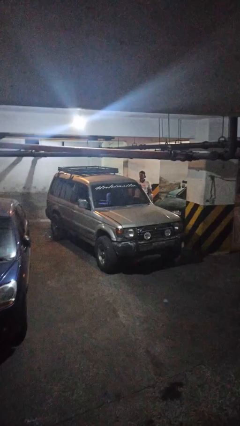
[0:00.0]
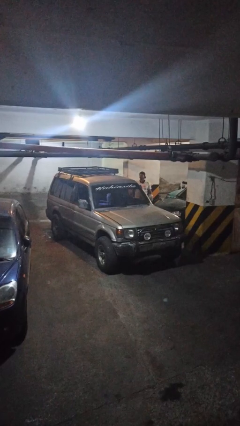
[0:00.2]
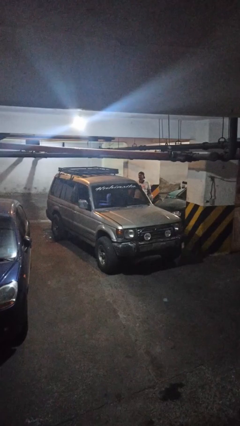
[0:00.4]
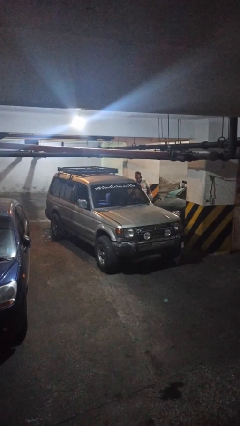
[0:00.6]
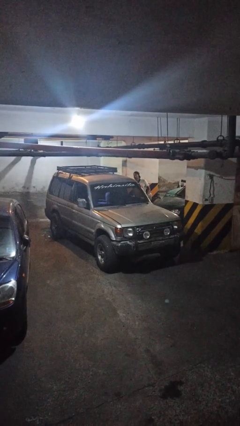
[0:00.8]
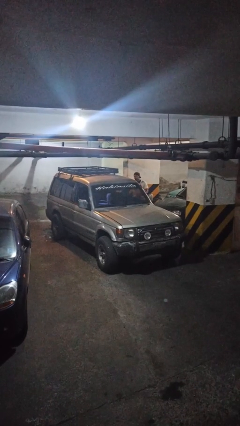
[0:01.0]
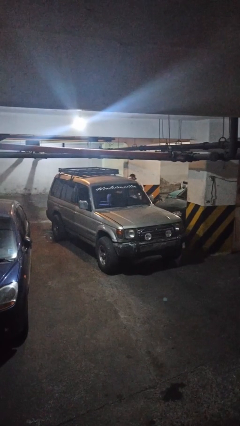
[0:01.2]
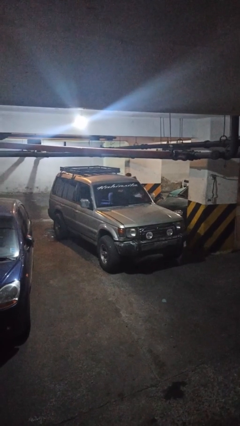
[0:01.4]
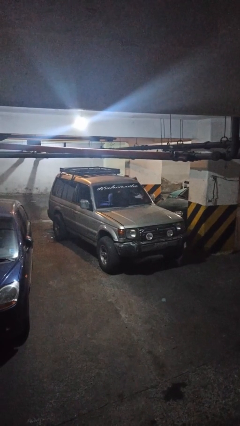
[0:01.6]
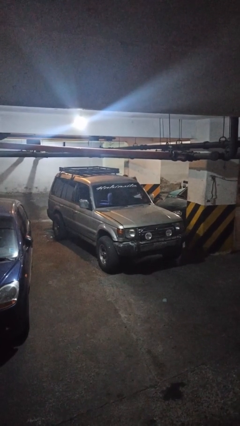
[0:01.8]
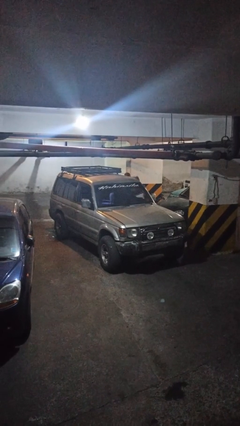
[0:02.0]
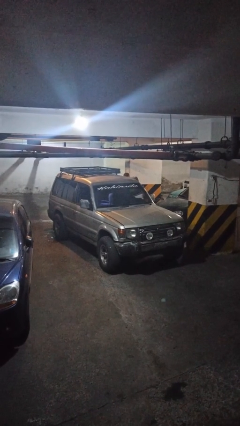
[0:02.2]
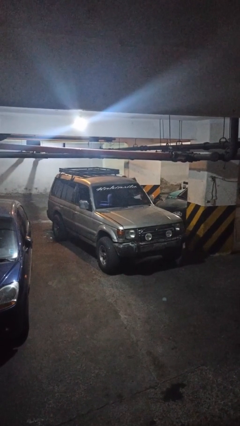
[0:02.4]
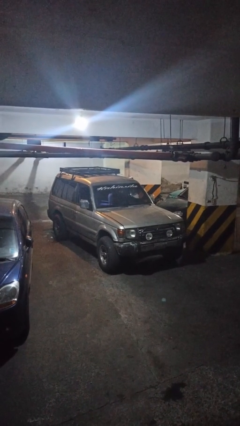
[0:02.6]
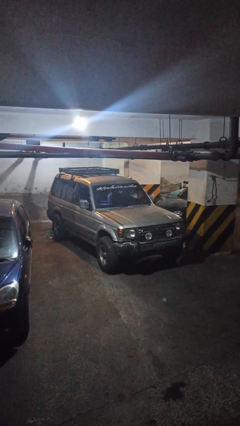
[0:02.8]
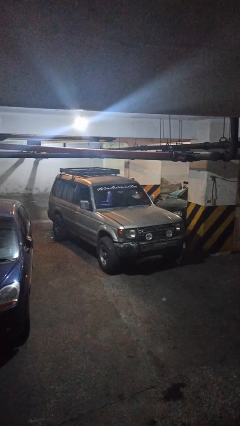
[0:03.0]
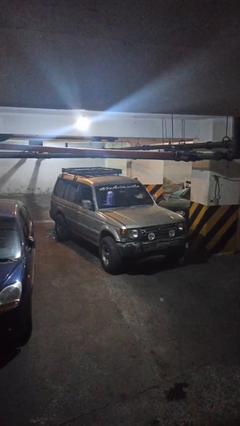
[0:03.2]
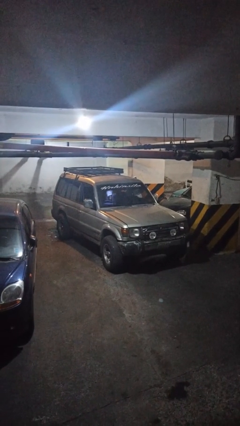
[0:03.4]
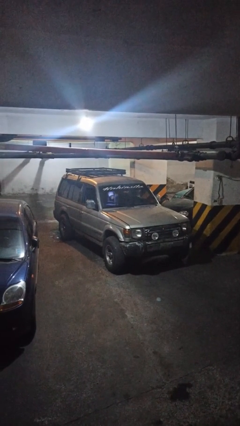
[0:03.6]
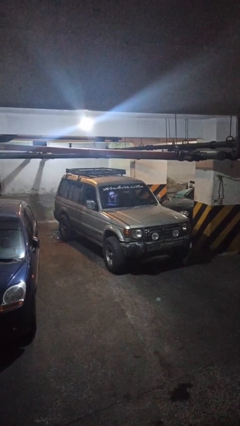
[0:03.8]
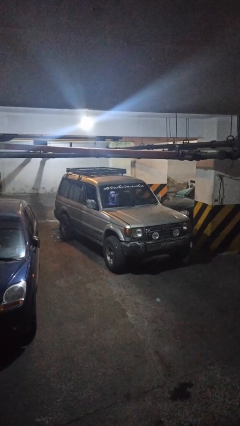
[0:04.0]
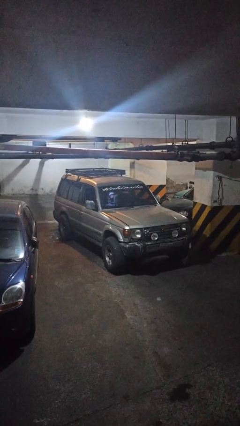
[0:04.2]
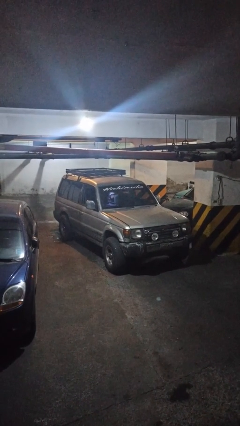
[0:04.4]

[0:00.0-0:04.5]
car picks up person

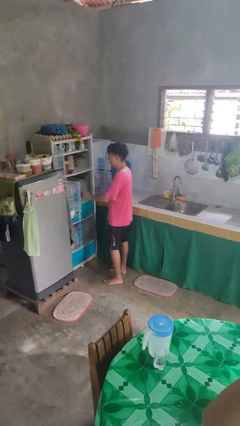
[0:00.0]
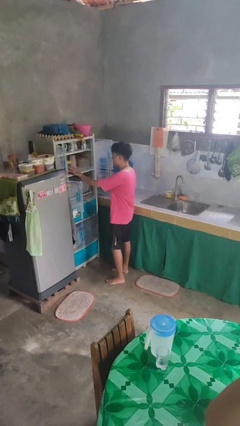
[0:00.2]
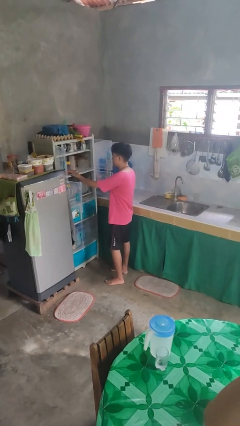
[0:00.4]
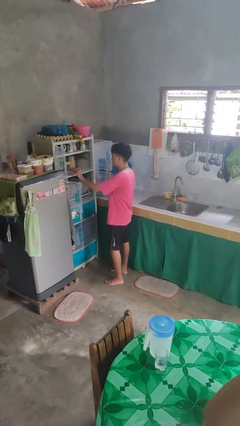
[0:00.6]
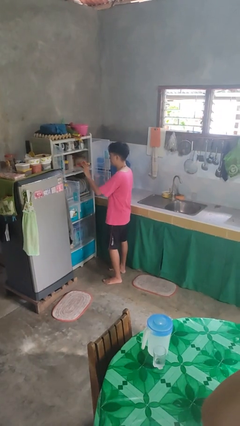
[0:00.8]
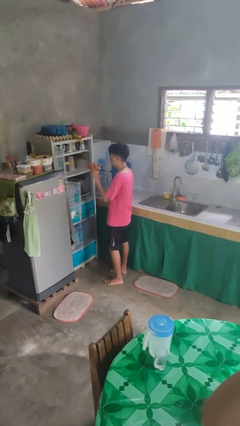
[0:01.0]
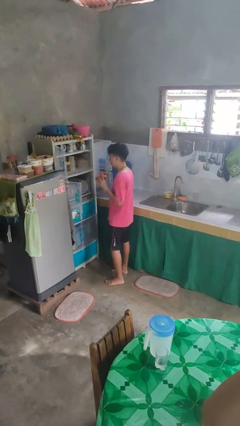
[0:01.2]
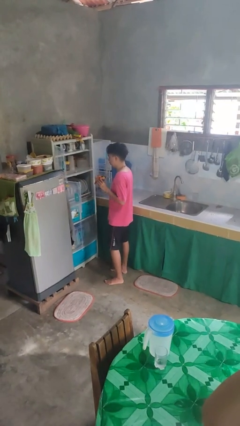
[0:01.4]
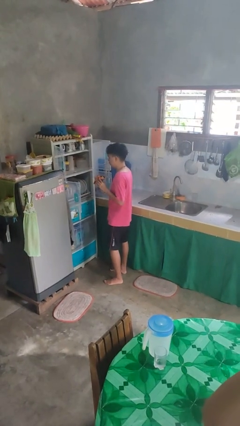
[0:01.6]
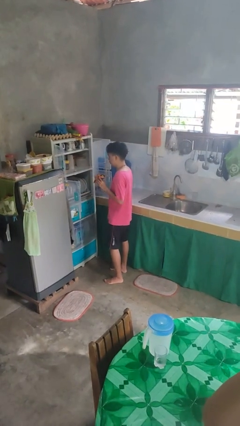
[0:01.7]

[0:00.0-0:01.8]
person takes object from cabinet

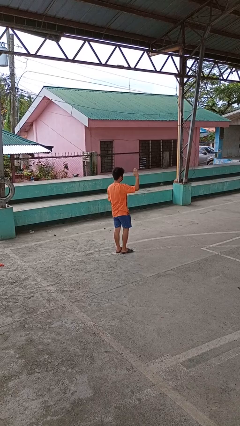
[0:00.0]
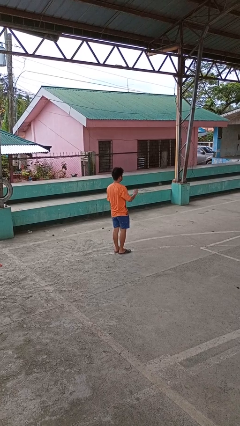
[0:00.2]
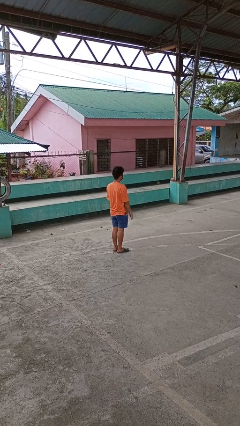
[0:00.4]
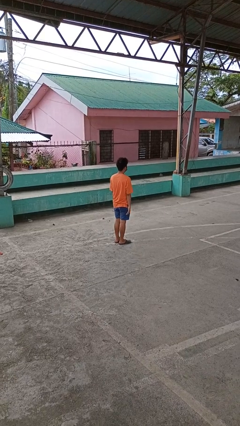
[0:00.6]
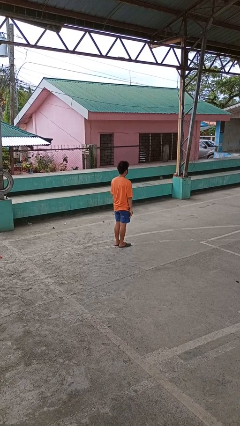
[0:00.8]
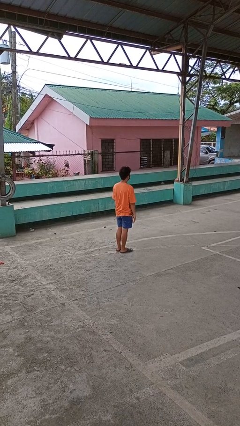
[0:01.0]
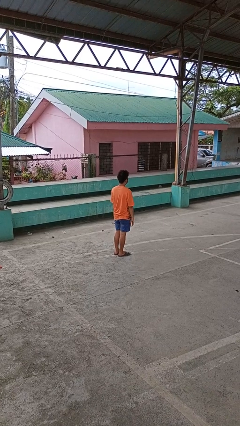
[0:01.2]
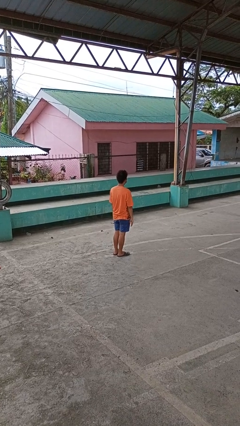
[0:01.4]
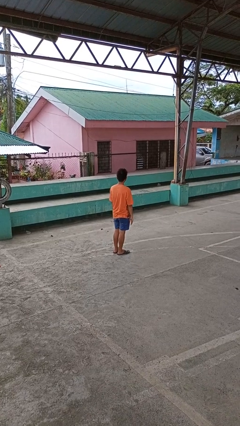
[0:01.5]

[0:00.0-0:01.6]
person gestures lower hand

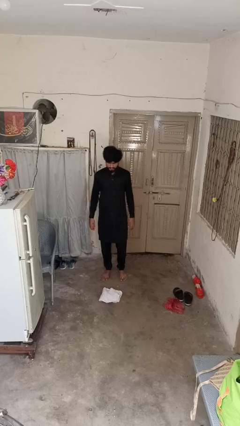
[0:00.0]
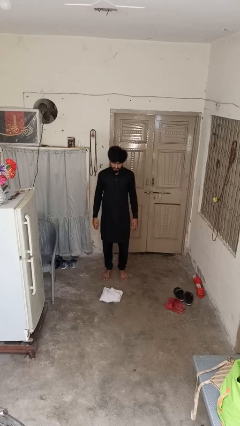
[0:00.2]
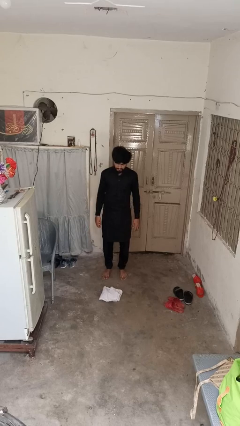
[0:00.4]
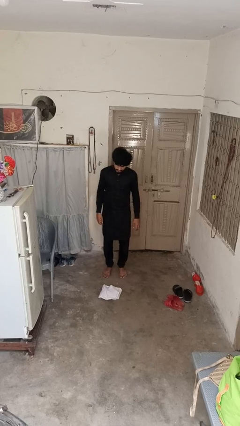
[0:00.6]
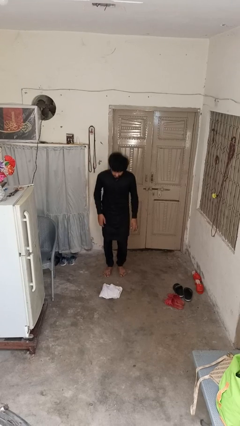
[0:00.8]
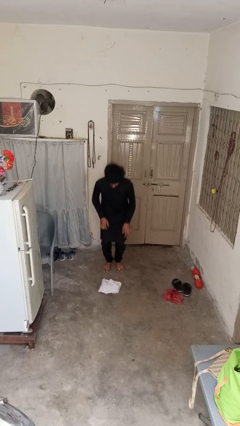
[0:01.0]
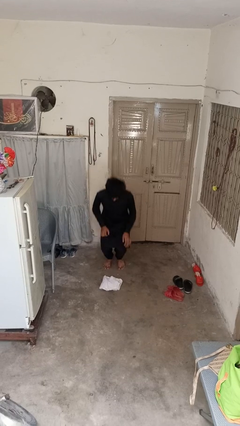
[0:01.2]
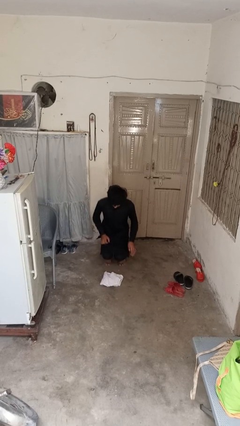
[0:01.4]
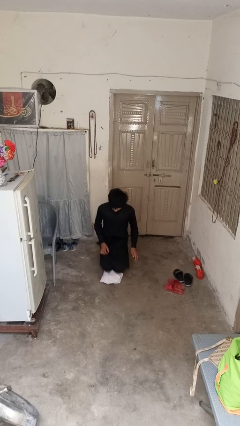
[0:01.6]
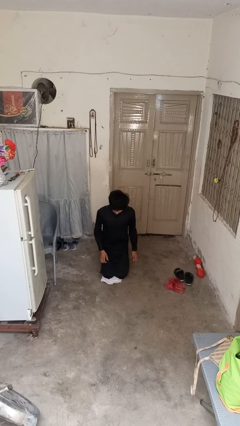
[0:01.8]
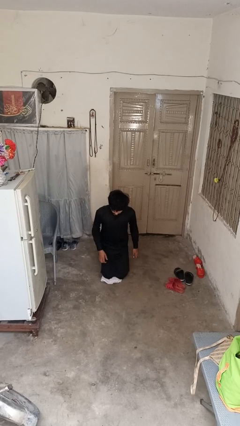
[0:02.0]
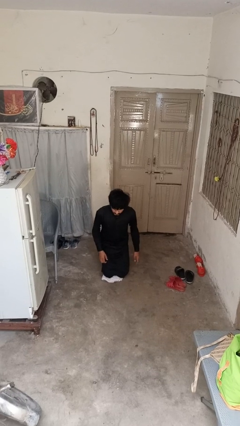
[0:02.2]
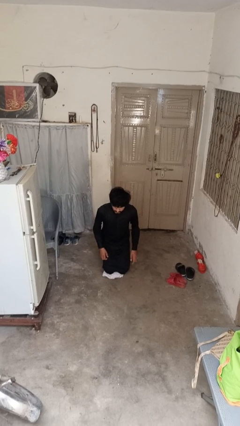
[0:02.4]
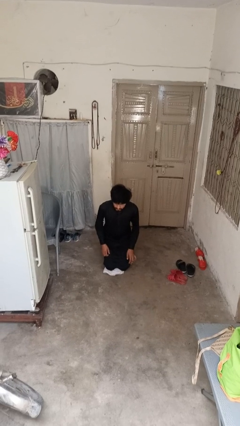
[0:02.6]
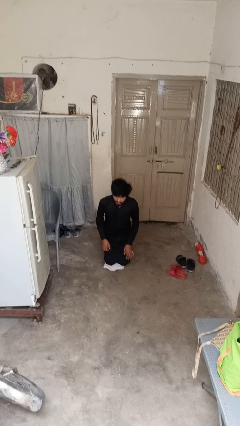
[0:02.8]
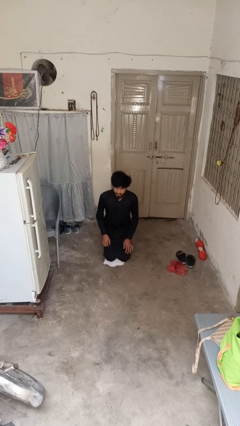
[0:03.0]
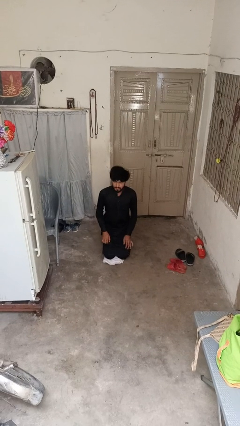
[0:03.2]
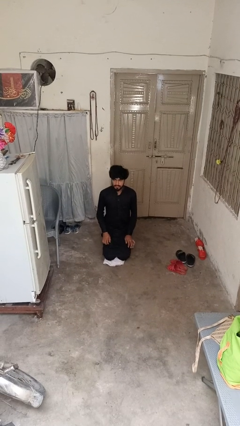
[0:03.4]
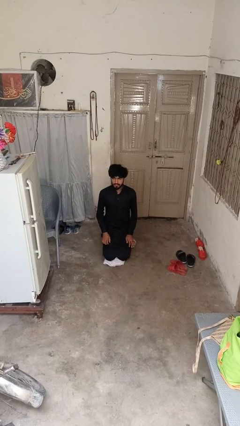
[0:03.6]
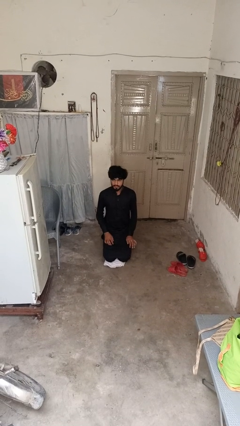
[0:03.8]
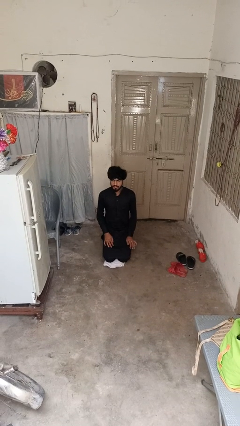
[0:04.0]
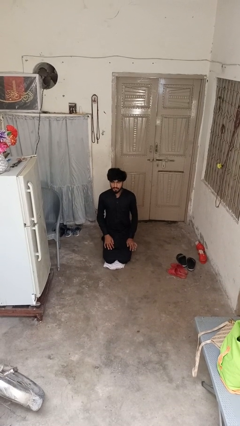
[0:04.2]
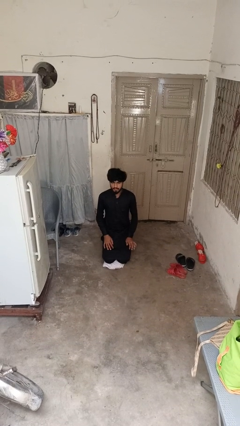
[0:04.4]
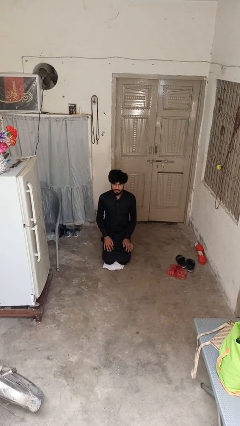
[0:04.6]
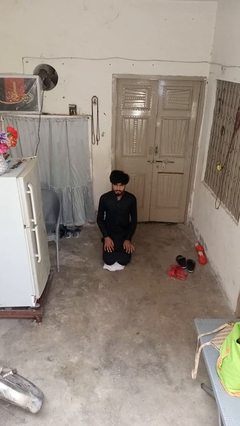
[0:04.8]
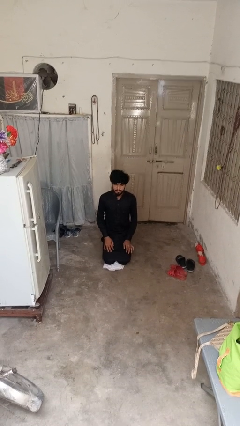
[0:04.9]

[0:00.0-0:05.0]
person kneels

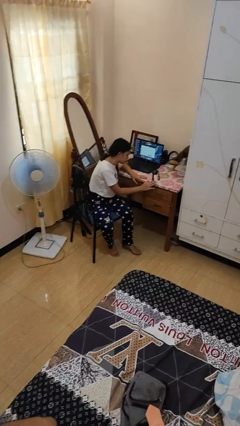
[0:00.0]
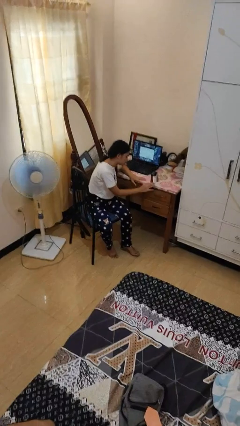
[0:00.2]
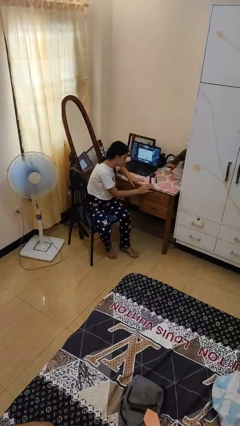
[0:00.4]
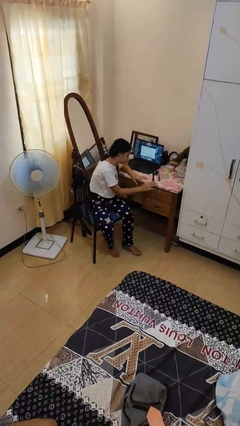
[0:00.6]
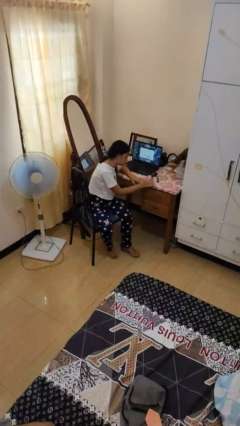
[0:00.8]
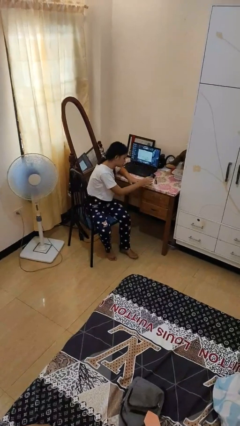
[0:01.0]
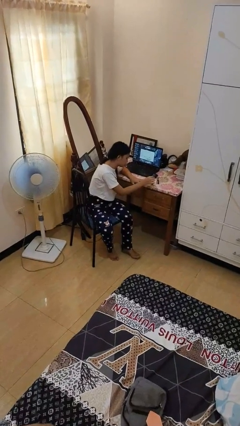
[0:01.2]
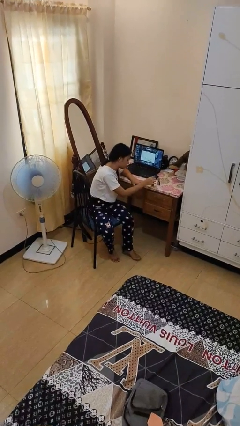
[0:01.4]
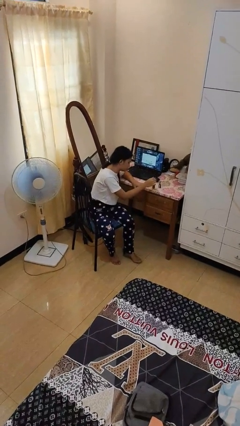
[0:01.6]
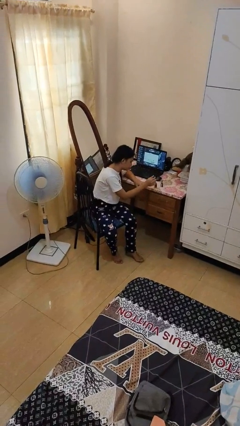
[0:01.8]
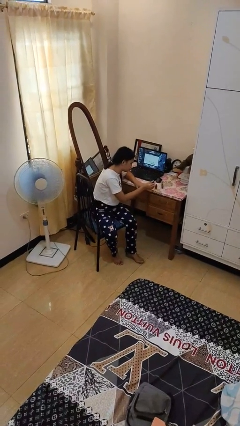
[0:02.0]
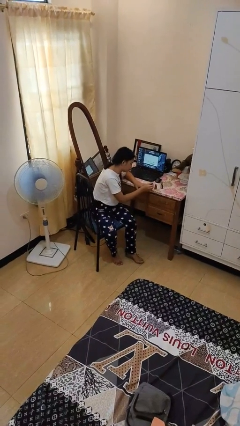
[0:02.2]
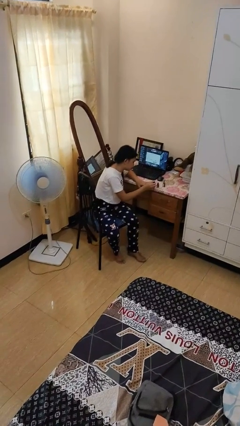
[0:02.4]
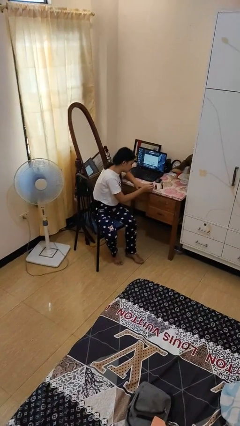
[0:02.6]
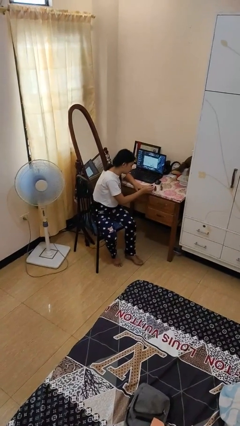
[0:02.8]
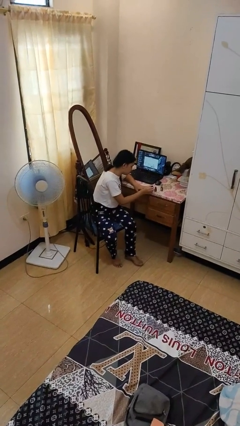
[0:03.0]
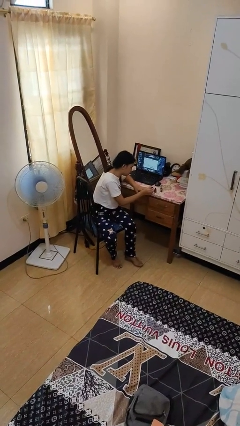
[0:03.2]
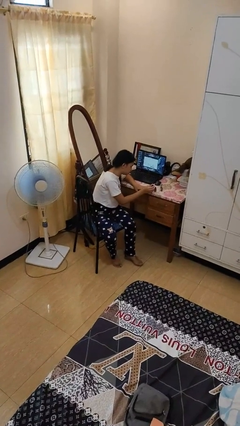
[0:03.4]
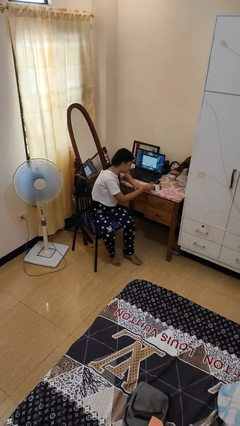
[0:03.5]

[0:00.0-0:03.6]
person paints fingernails

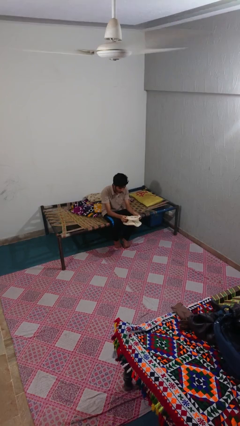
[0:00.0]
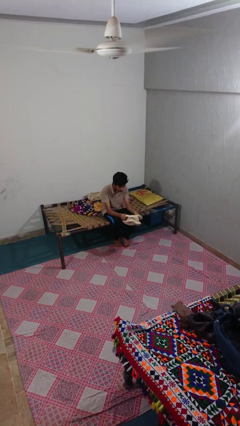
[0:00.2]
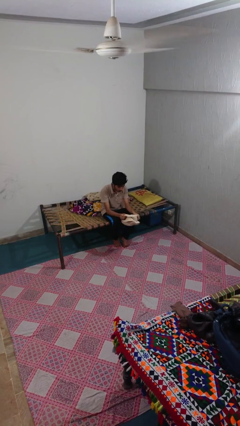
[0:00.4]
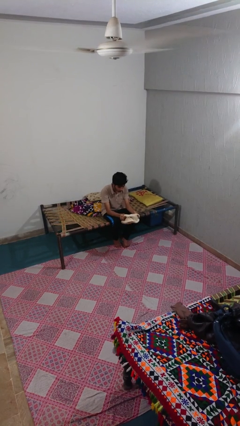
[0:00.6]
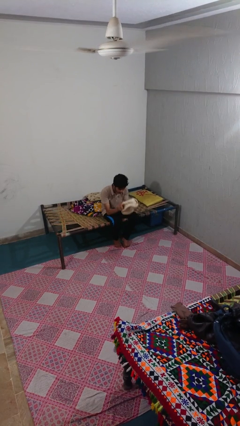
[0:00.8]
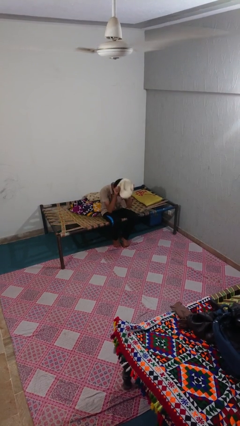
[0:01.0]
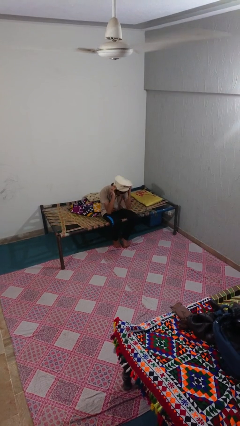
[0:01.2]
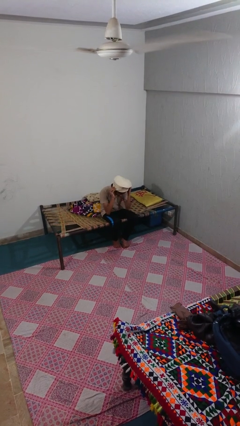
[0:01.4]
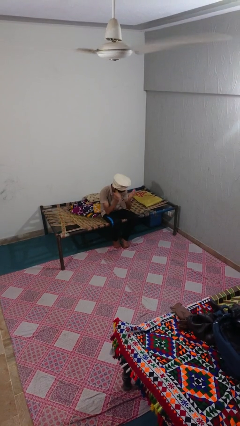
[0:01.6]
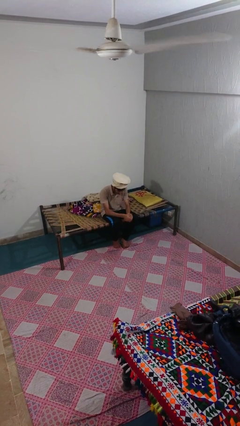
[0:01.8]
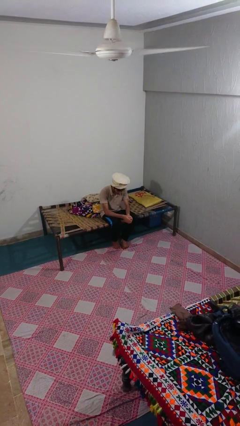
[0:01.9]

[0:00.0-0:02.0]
person puts on hat
